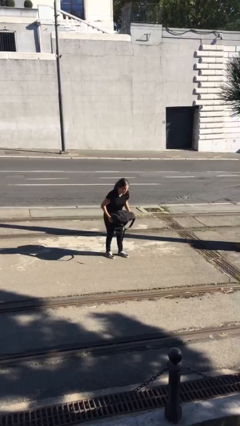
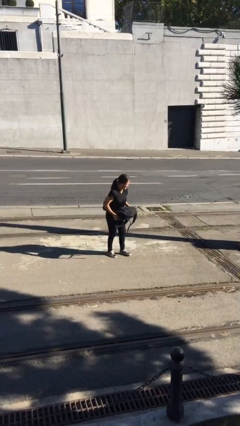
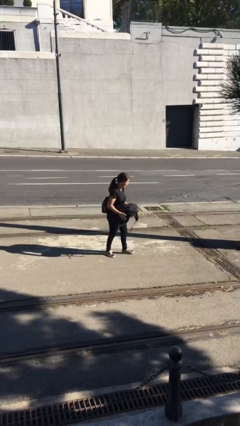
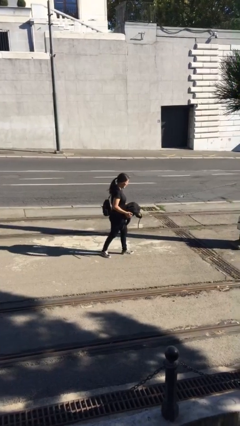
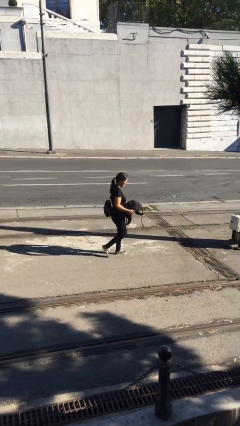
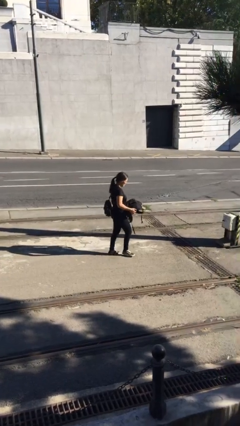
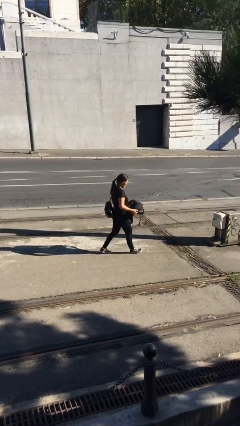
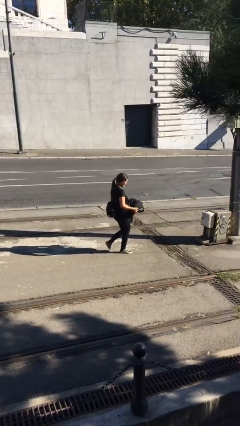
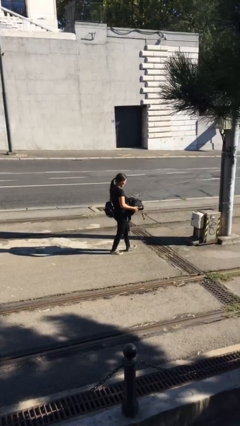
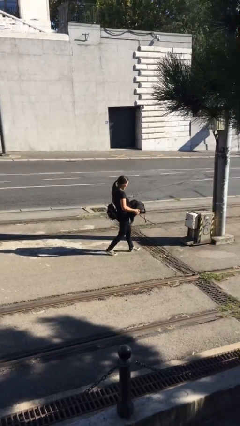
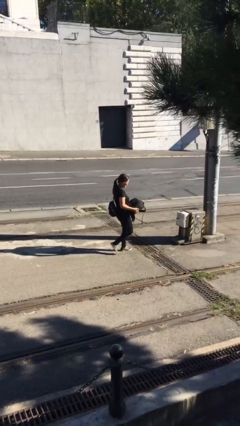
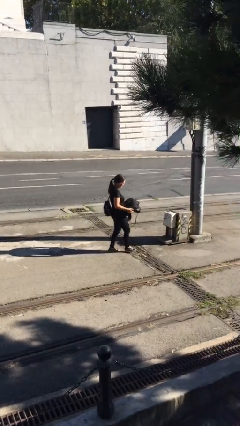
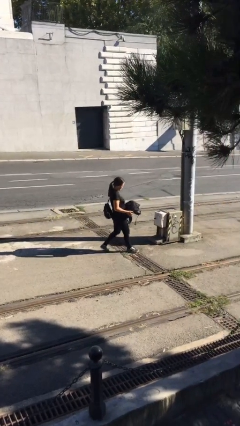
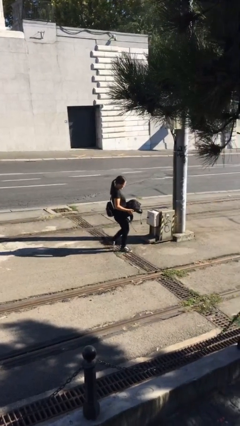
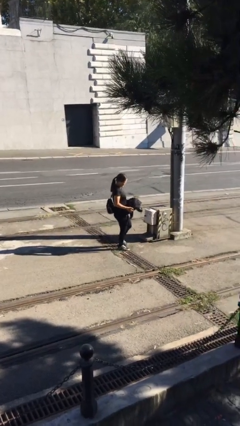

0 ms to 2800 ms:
person carries heavy object

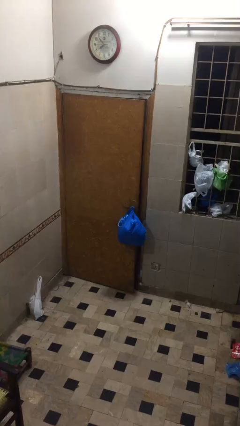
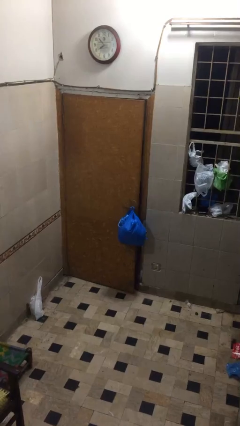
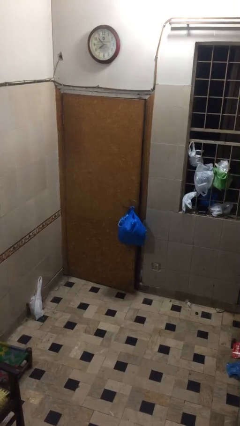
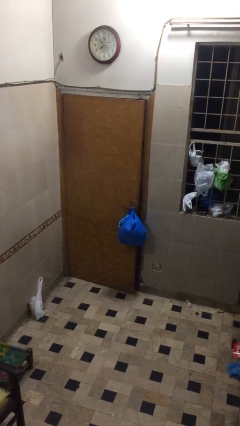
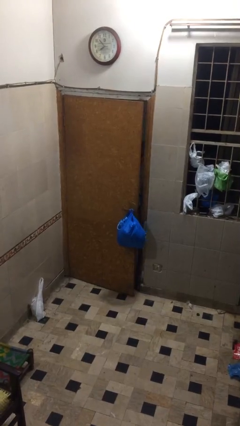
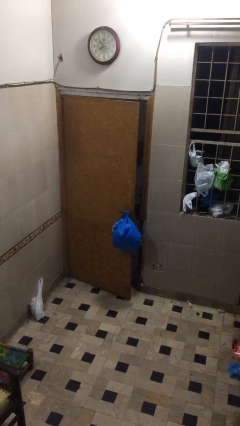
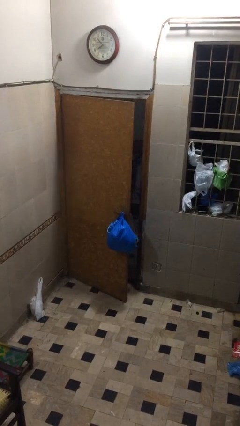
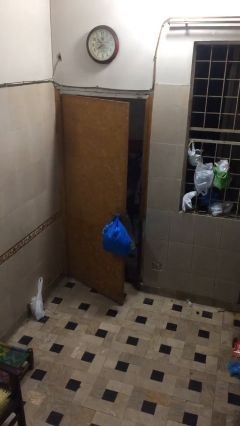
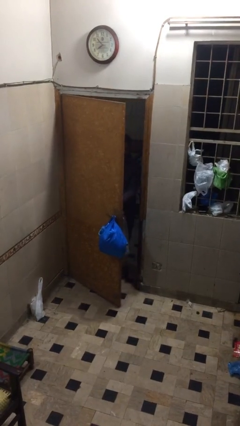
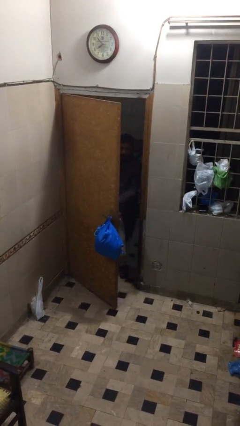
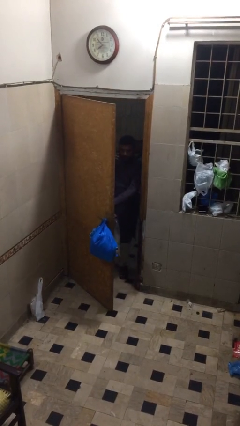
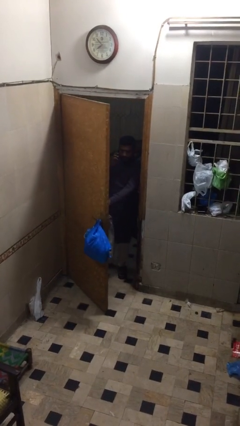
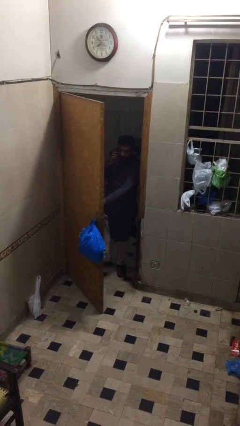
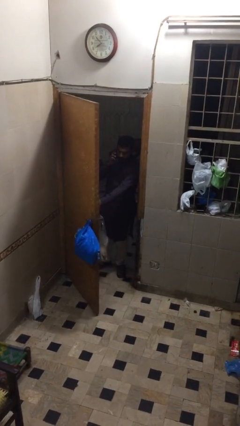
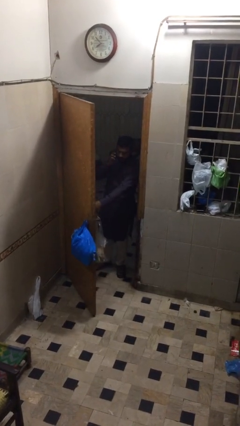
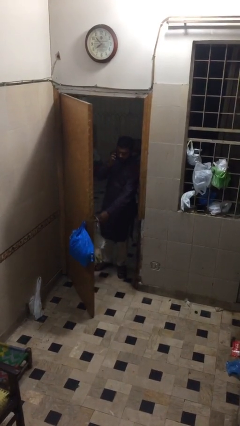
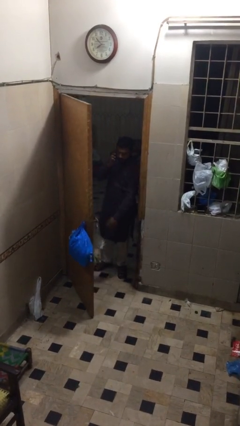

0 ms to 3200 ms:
person opens facility door

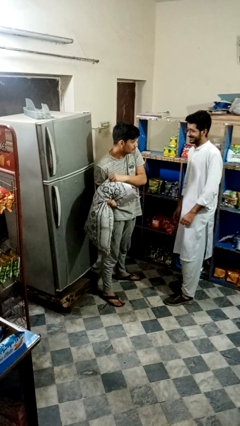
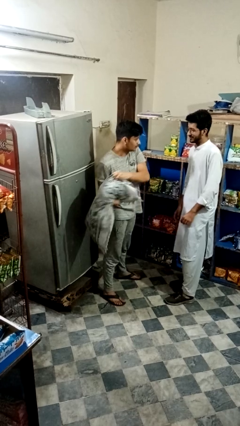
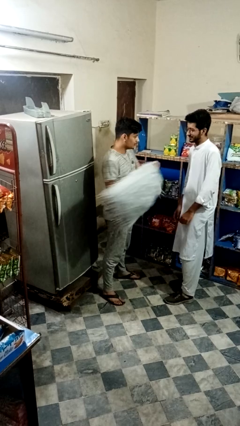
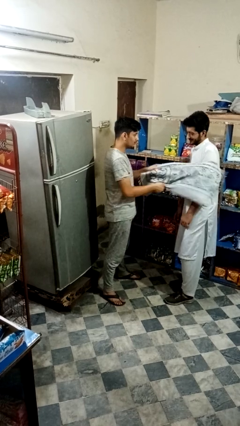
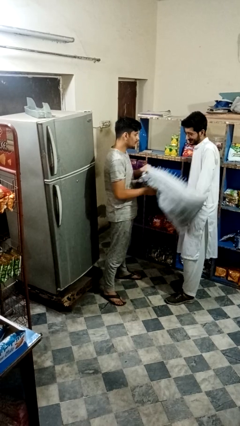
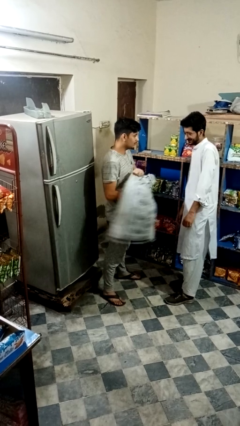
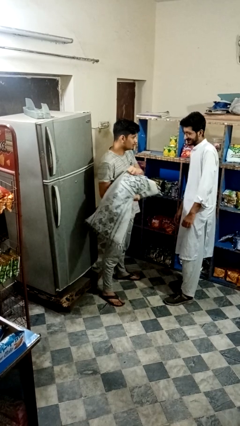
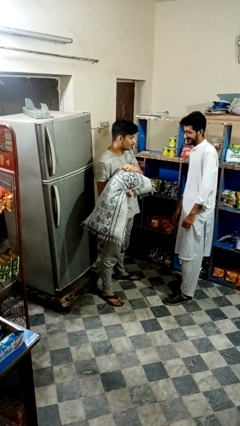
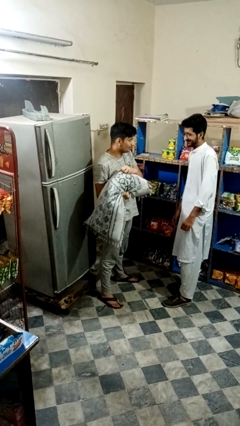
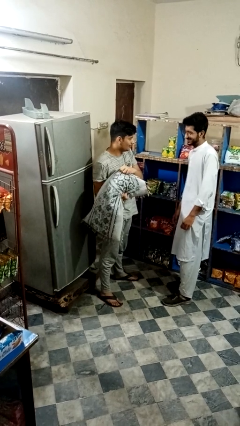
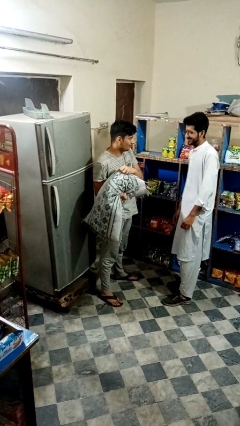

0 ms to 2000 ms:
person hits person with pillow

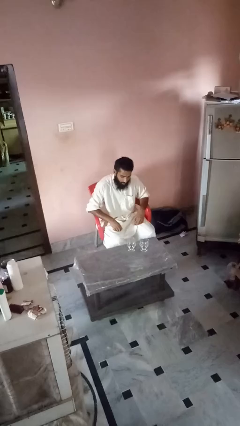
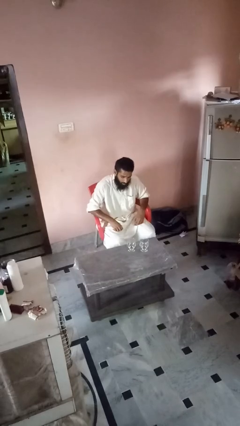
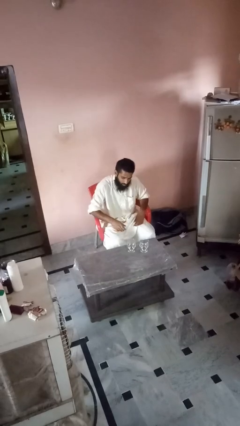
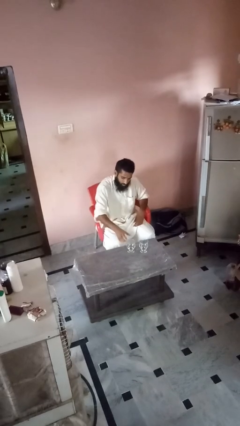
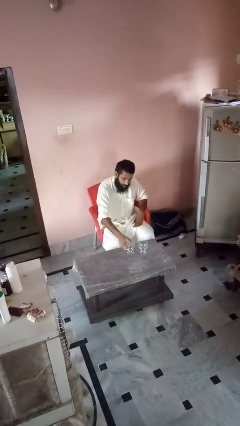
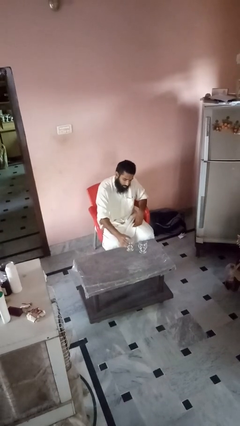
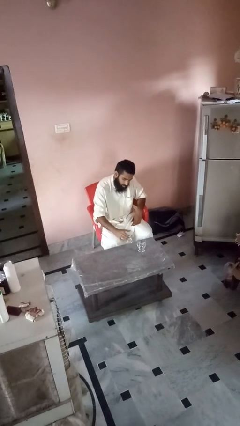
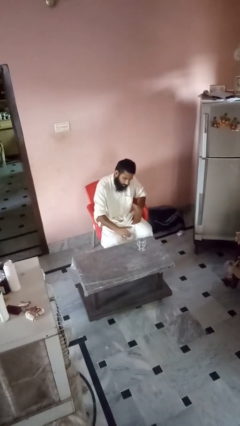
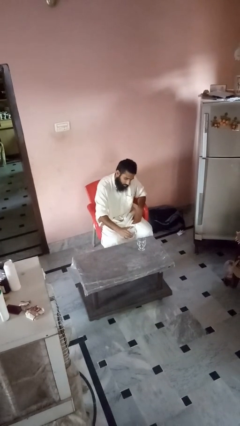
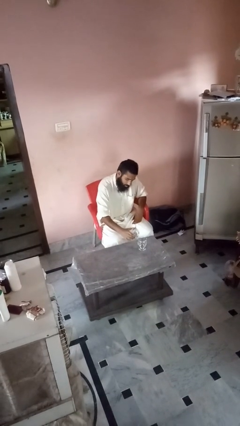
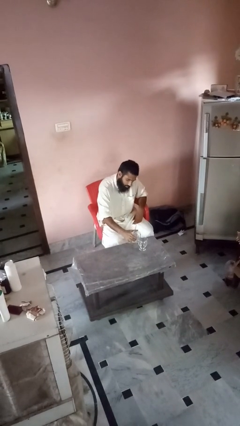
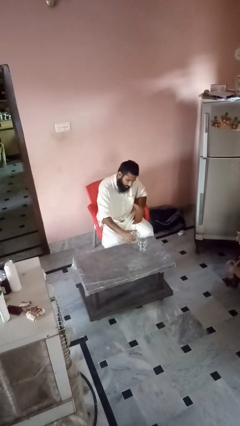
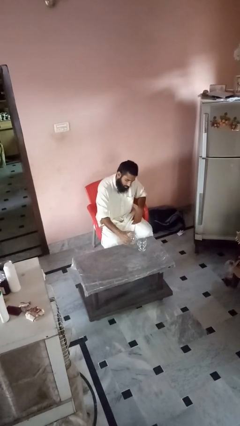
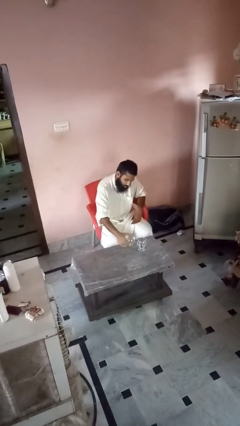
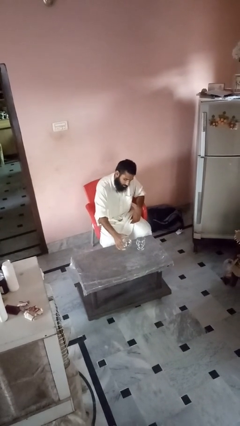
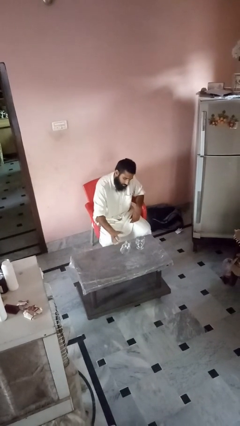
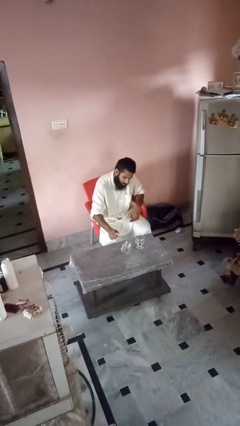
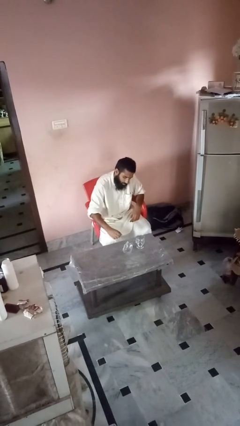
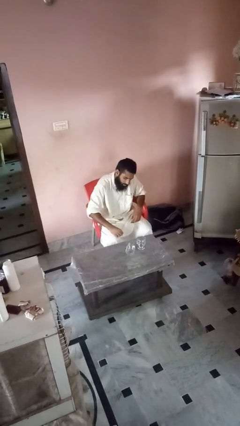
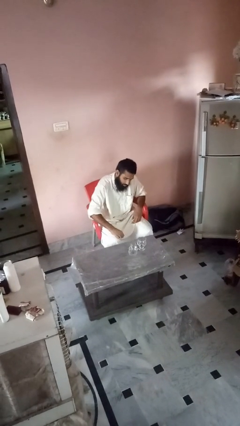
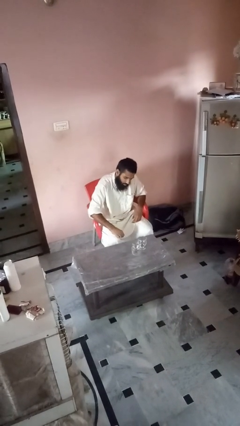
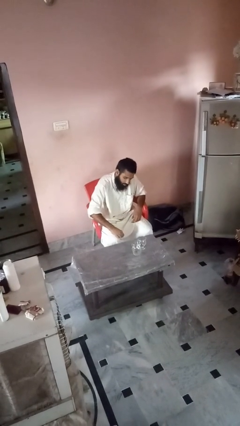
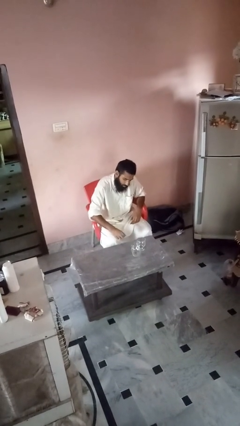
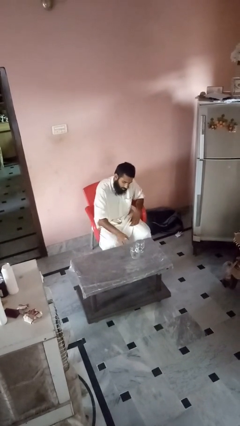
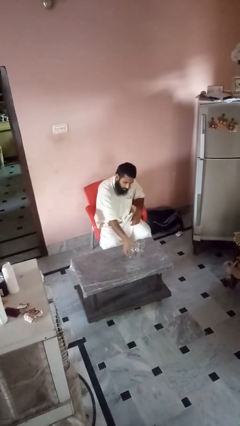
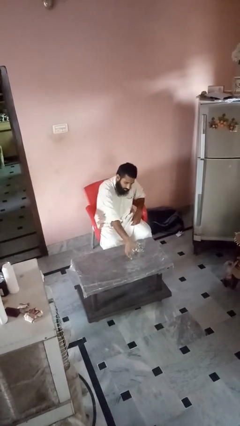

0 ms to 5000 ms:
person knocks over glass

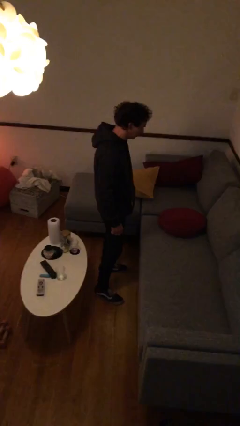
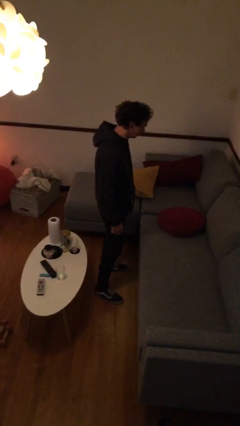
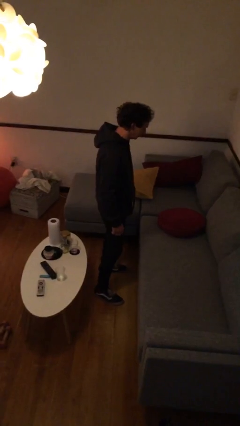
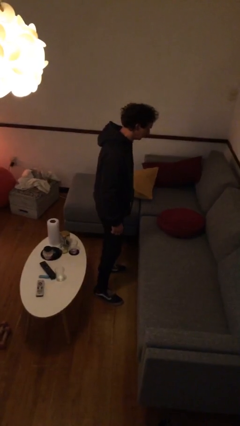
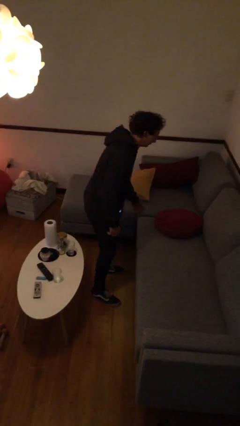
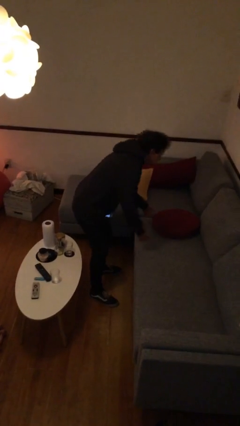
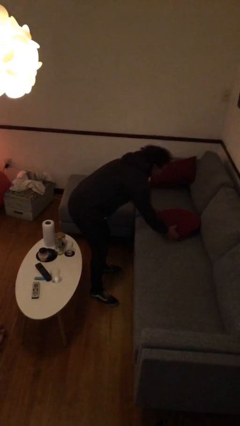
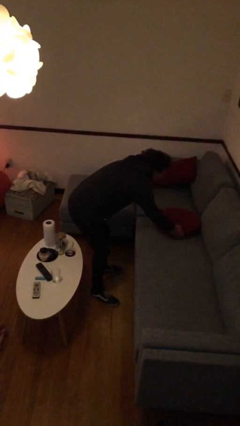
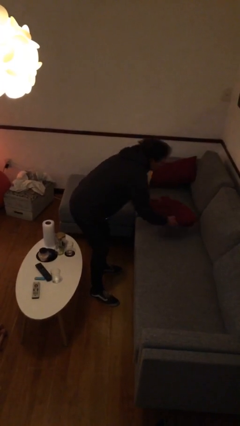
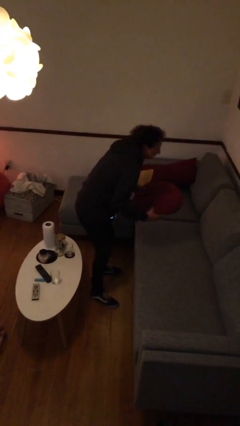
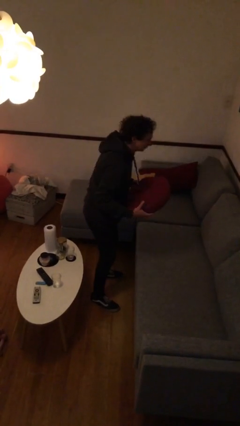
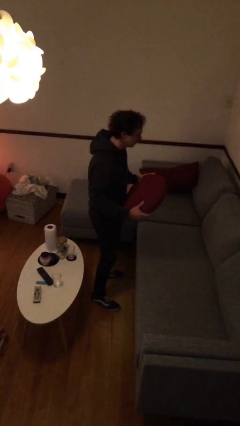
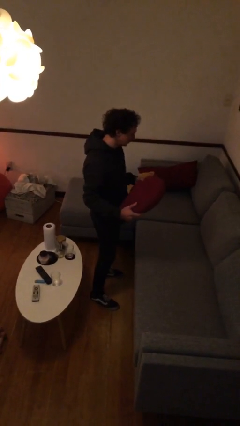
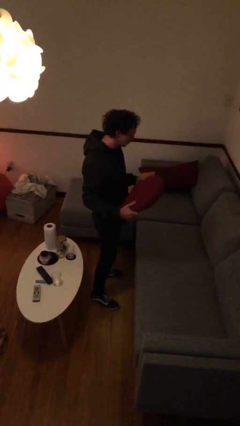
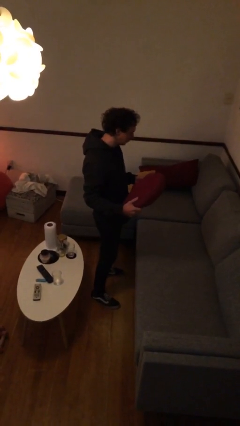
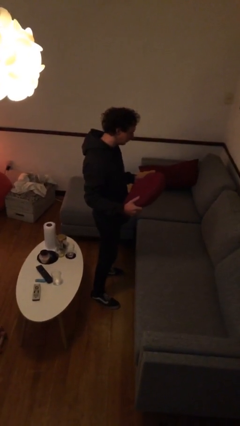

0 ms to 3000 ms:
person picks up object from couch

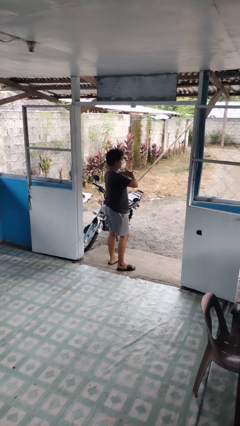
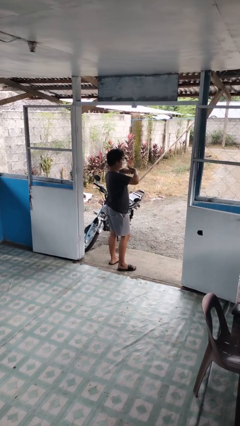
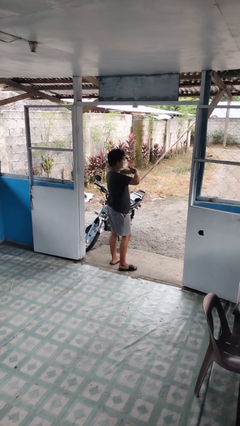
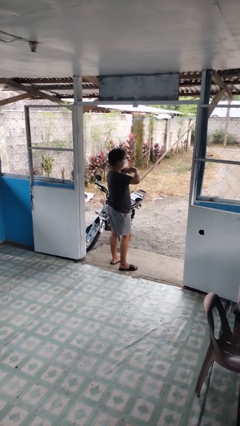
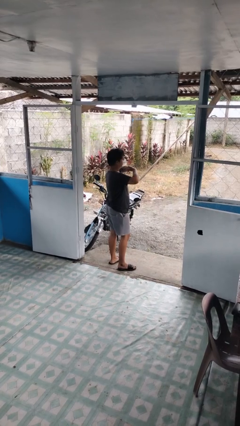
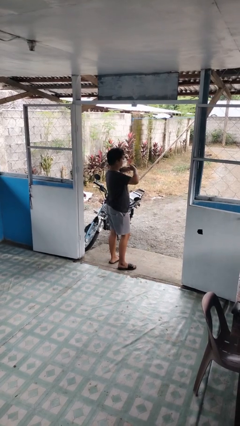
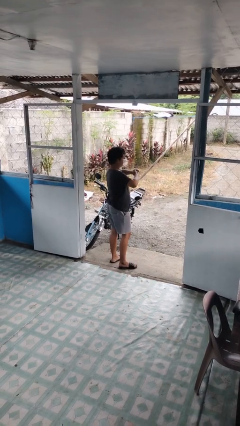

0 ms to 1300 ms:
person cracks knuckles

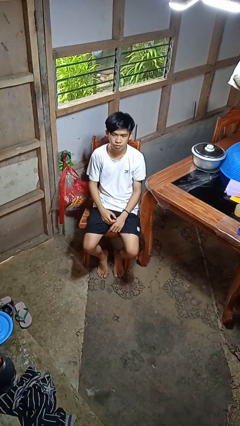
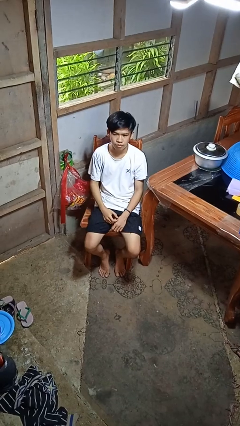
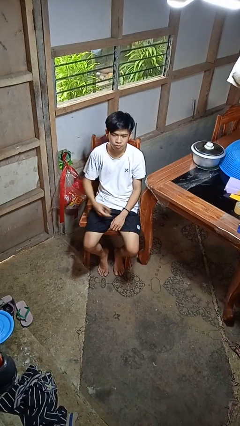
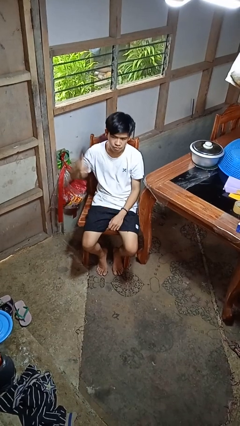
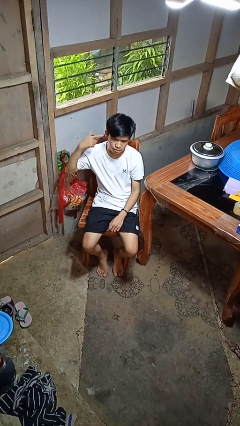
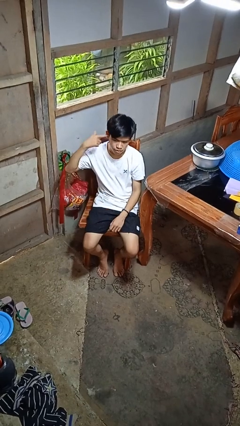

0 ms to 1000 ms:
person gestures listen closely
